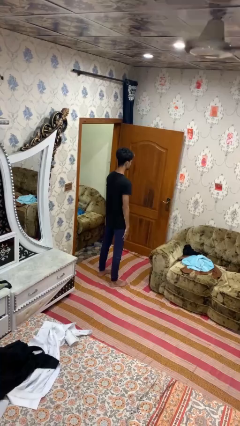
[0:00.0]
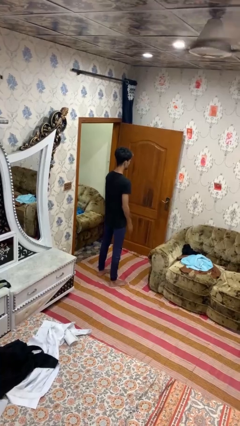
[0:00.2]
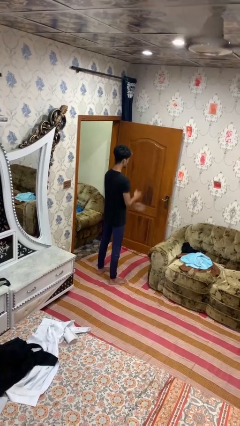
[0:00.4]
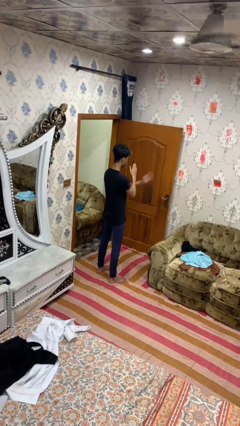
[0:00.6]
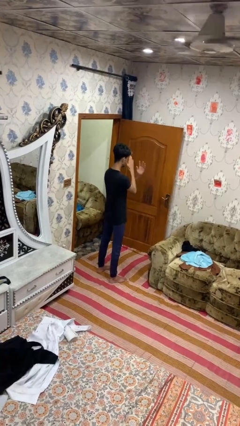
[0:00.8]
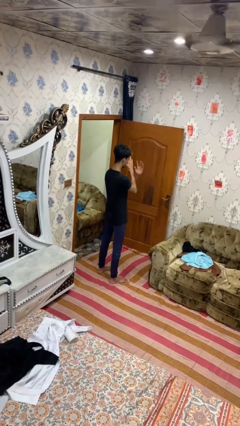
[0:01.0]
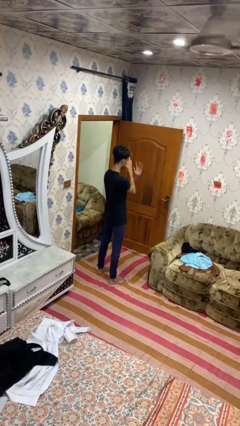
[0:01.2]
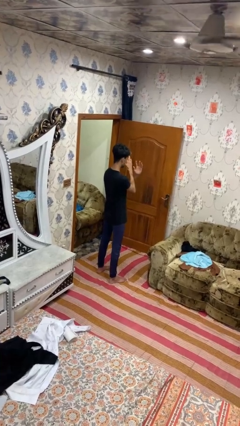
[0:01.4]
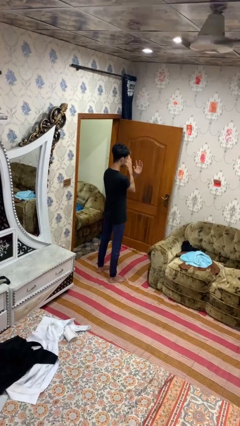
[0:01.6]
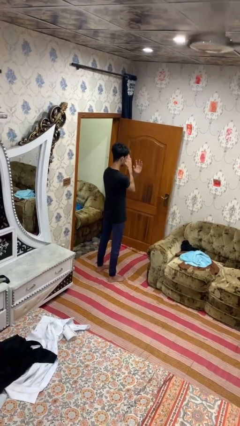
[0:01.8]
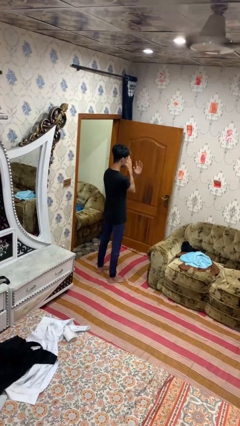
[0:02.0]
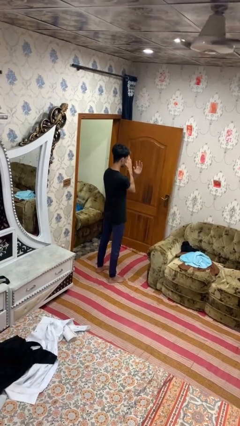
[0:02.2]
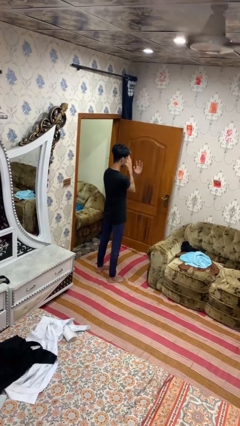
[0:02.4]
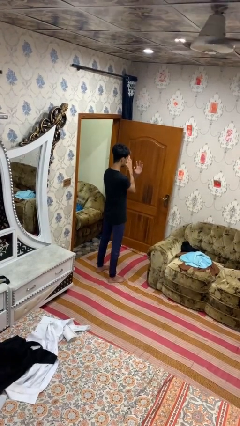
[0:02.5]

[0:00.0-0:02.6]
person gestures arms x

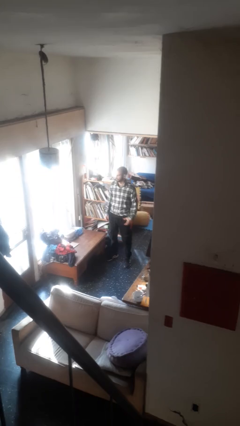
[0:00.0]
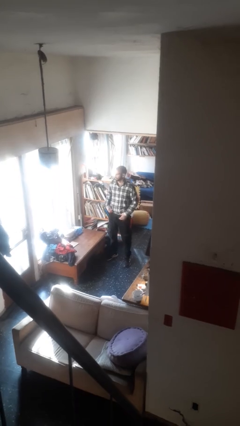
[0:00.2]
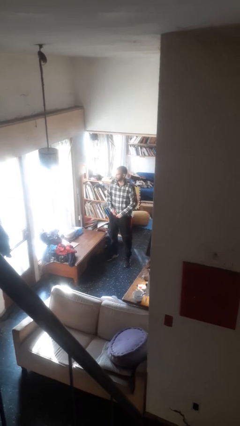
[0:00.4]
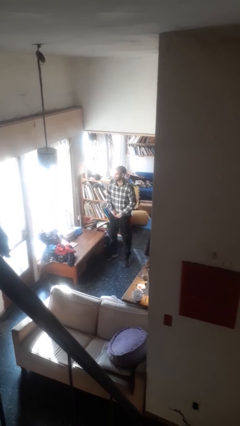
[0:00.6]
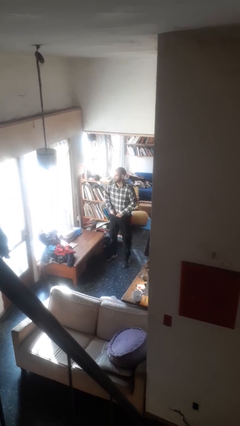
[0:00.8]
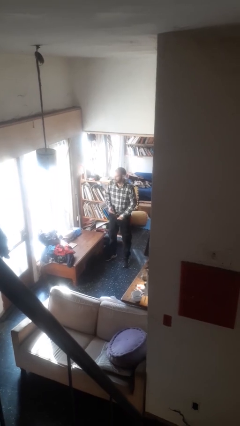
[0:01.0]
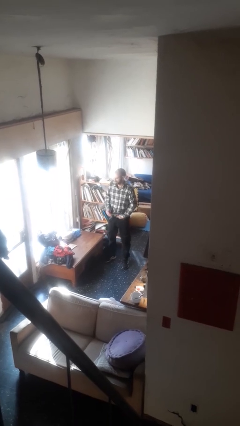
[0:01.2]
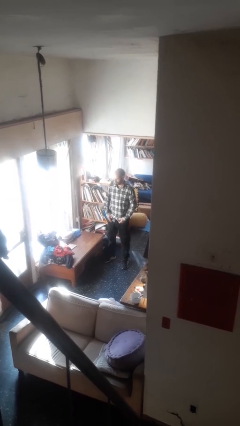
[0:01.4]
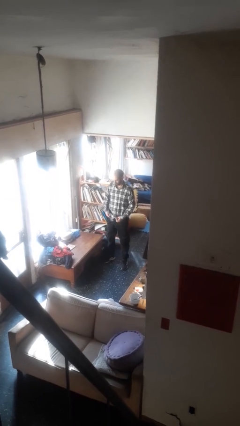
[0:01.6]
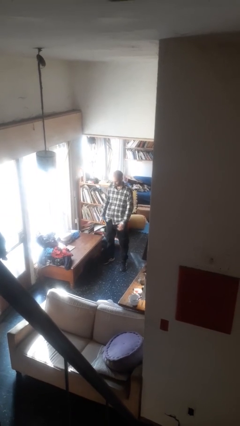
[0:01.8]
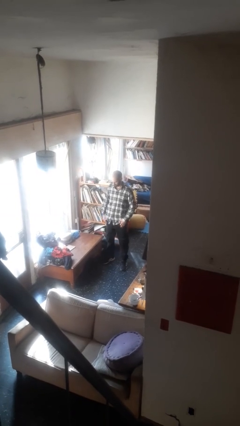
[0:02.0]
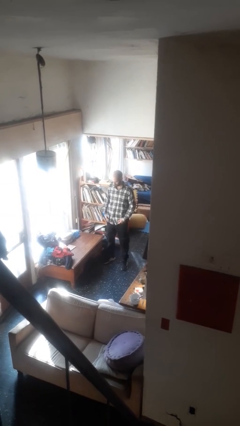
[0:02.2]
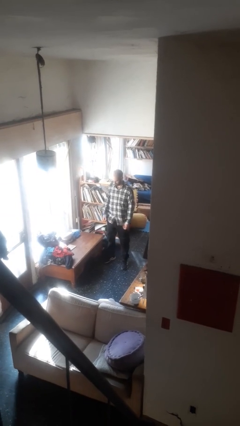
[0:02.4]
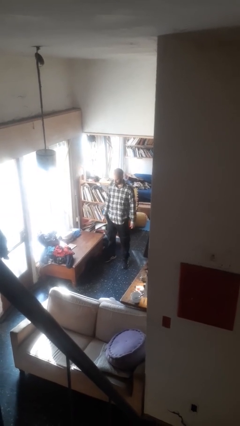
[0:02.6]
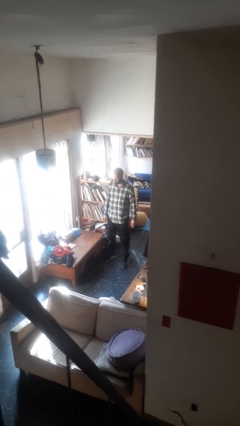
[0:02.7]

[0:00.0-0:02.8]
person untucks shirt

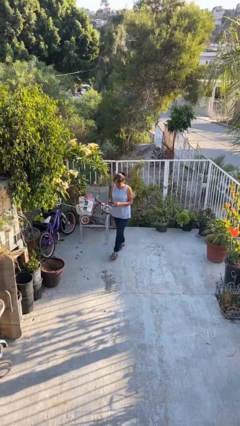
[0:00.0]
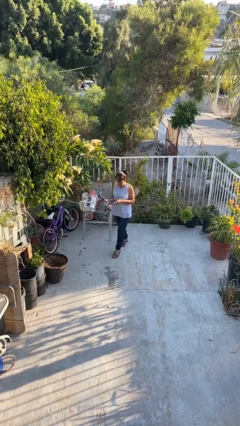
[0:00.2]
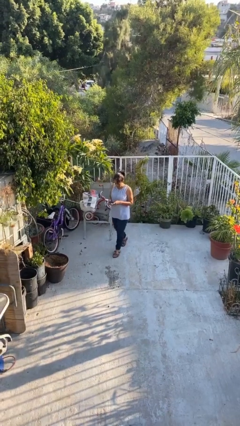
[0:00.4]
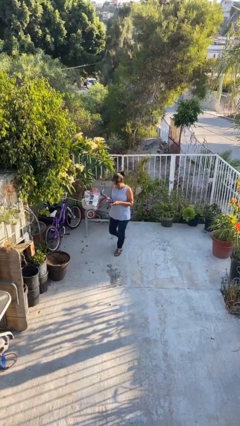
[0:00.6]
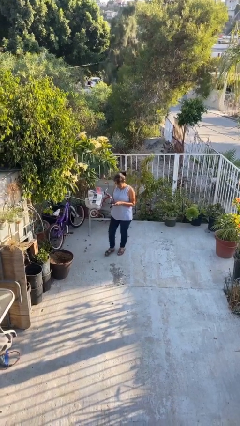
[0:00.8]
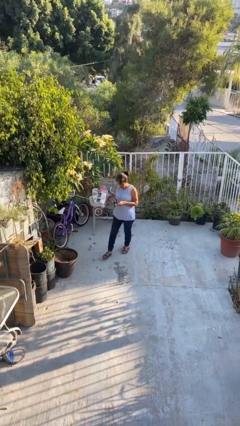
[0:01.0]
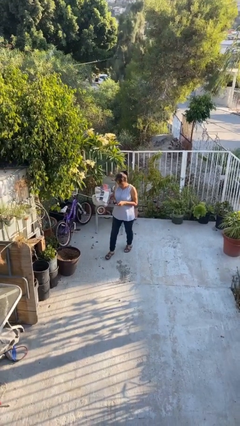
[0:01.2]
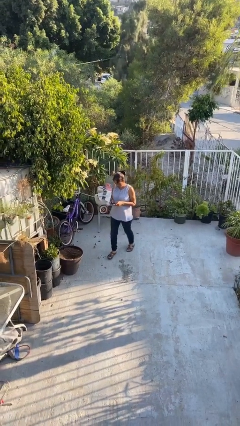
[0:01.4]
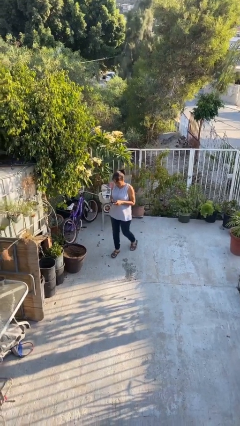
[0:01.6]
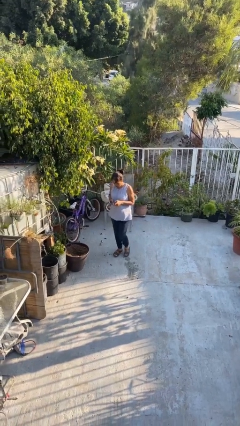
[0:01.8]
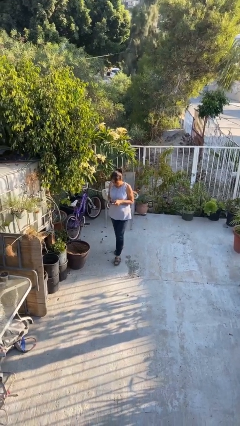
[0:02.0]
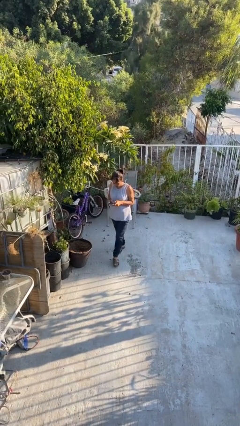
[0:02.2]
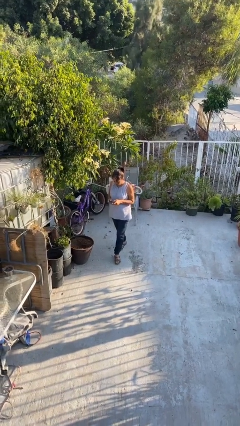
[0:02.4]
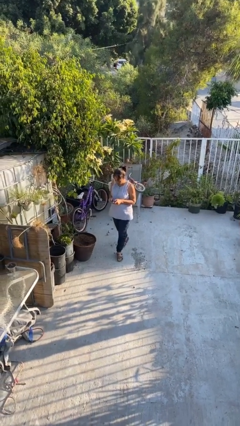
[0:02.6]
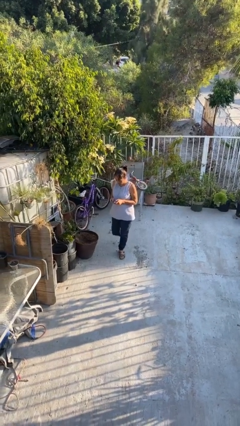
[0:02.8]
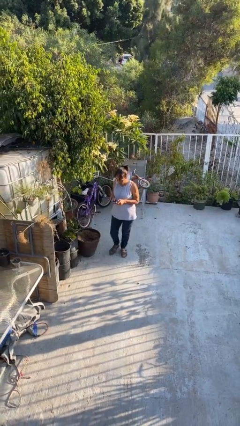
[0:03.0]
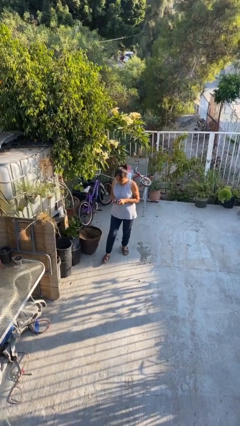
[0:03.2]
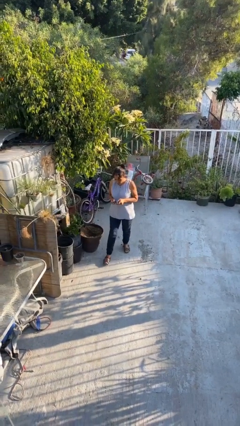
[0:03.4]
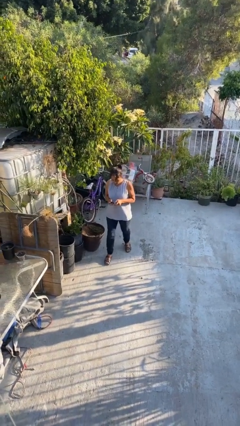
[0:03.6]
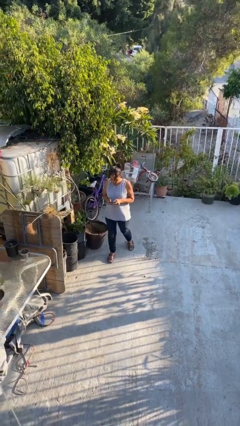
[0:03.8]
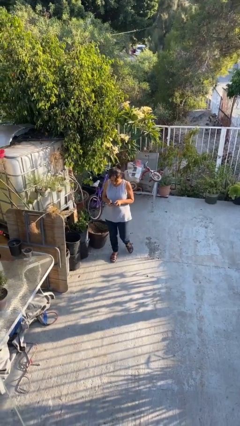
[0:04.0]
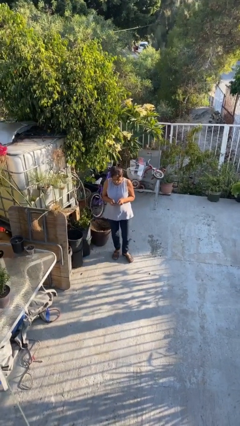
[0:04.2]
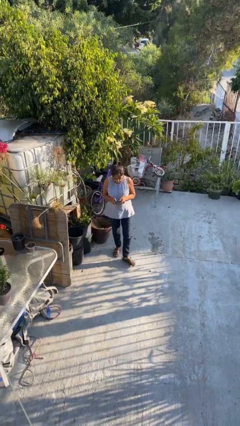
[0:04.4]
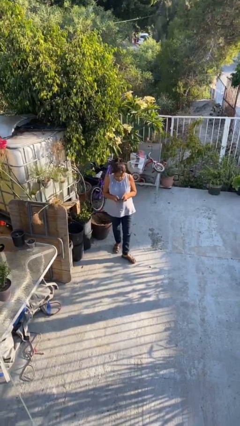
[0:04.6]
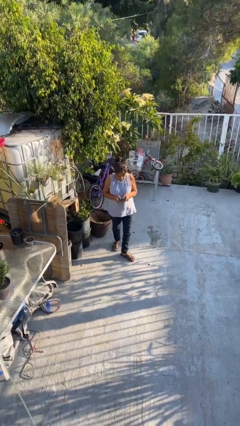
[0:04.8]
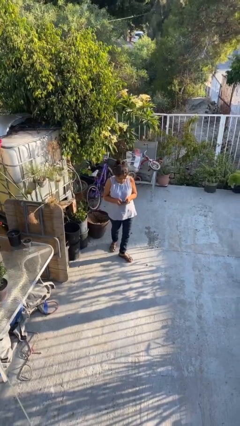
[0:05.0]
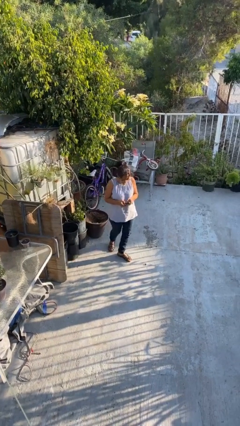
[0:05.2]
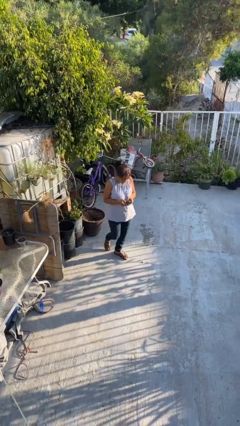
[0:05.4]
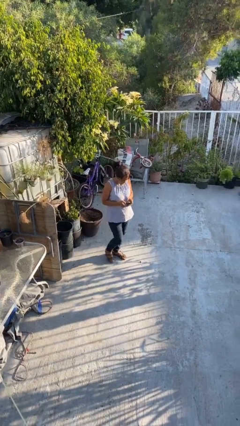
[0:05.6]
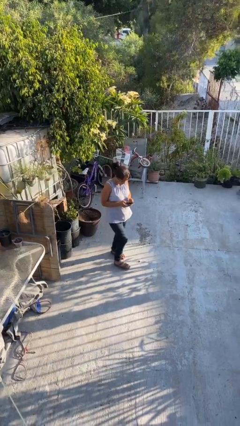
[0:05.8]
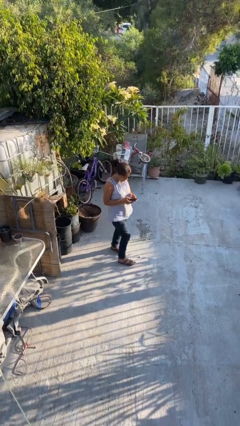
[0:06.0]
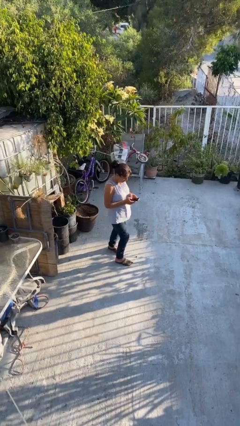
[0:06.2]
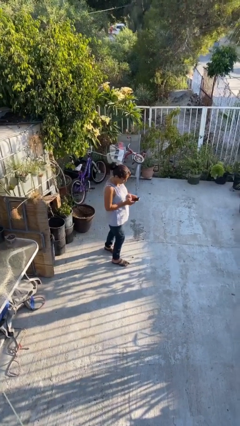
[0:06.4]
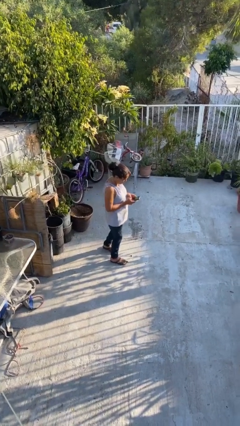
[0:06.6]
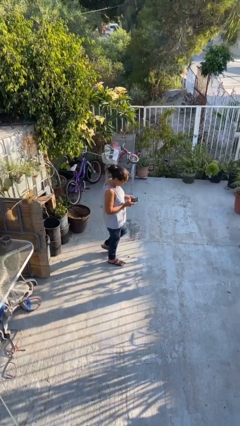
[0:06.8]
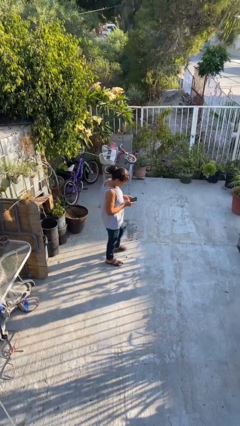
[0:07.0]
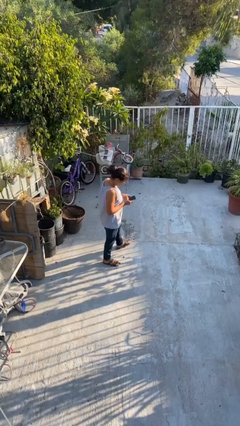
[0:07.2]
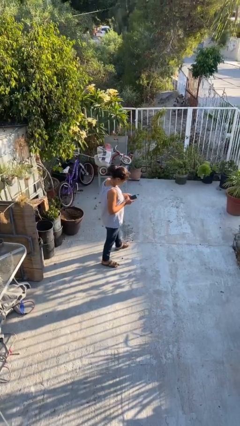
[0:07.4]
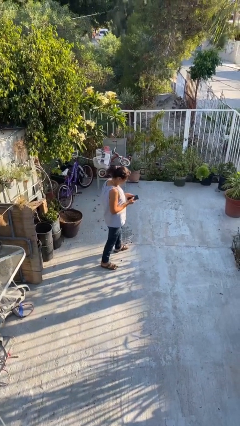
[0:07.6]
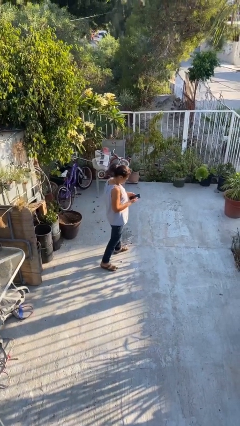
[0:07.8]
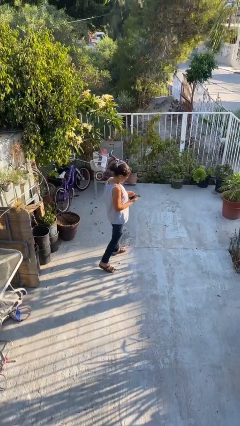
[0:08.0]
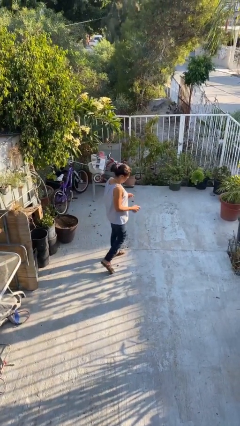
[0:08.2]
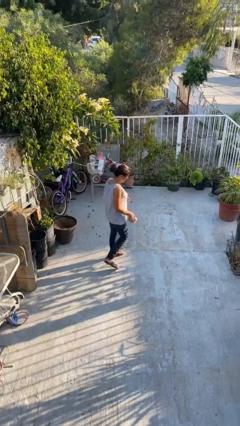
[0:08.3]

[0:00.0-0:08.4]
person texts on phone

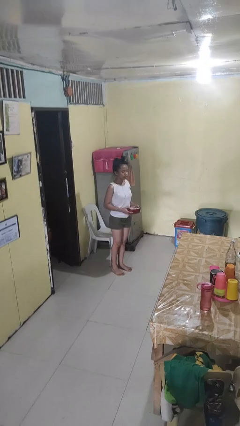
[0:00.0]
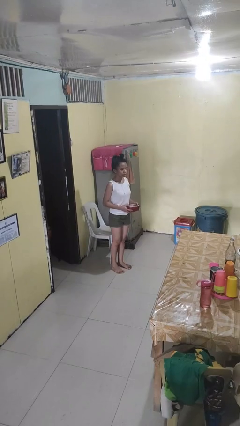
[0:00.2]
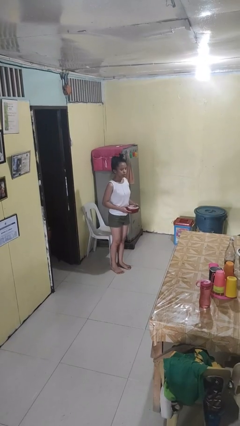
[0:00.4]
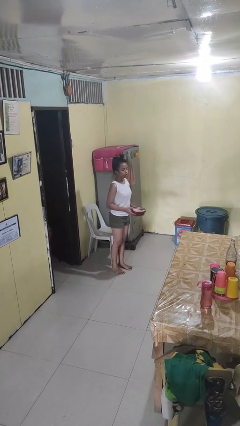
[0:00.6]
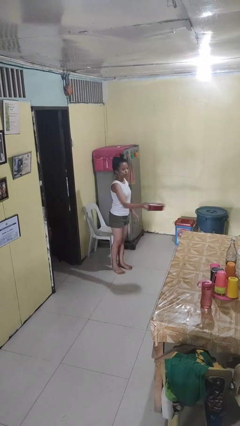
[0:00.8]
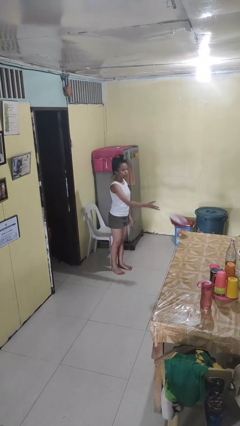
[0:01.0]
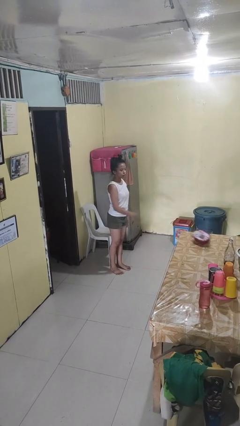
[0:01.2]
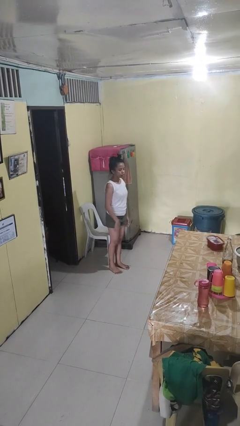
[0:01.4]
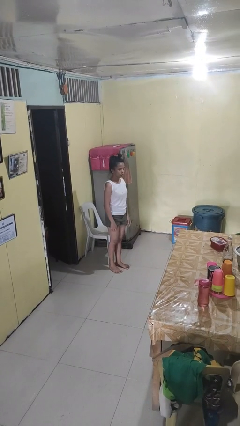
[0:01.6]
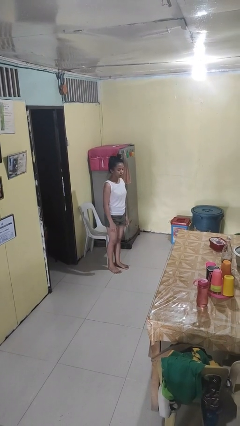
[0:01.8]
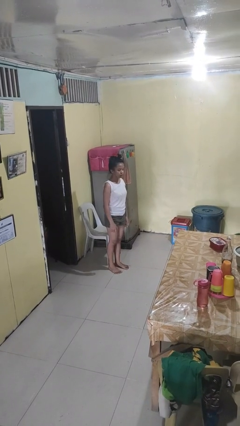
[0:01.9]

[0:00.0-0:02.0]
person throws object on table

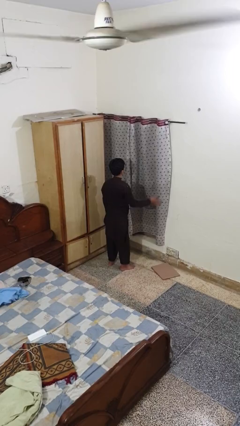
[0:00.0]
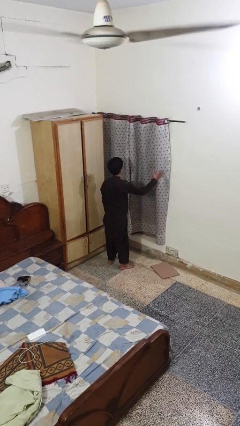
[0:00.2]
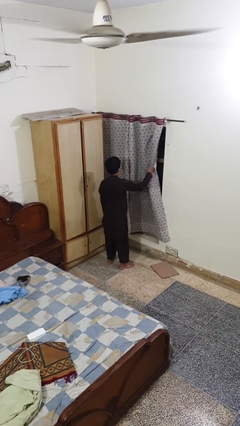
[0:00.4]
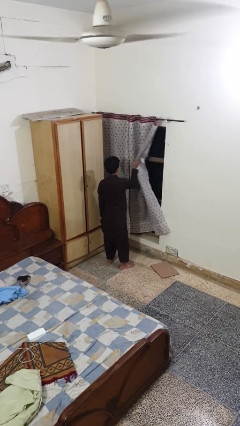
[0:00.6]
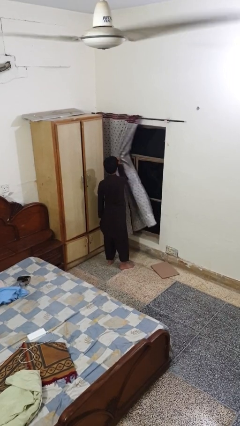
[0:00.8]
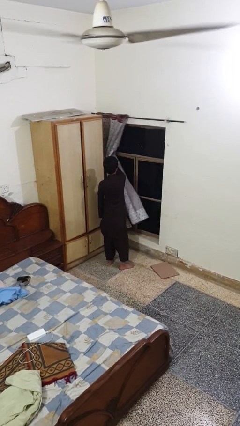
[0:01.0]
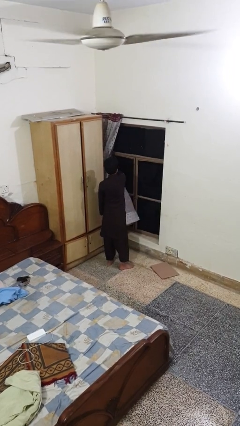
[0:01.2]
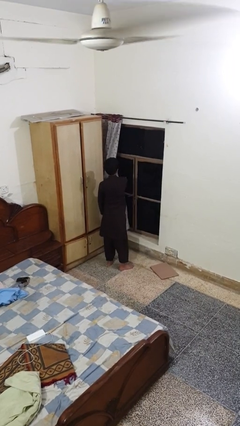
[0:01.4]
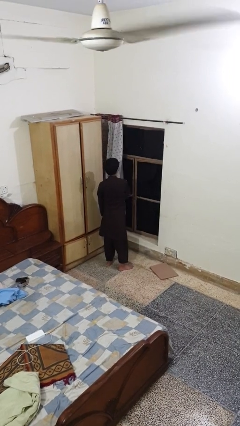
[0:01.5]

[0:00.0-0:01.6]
person opens curtains
